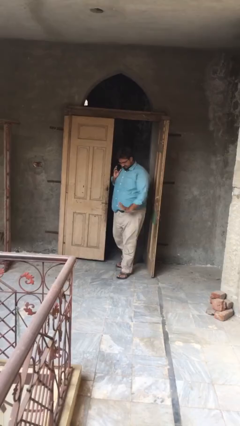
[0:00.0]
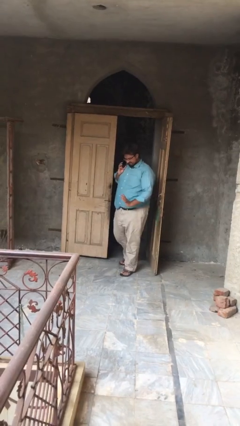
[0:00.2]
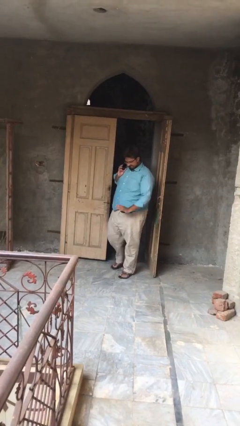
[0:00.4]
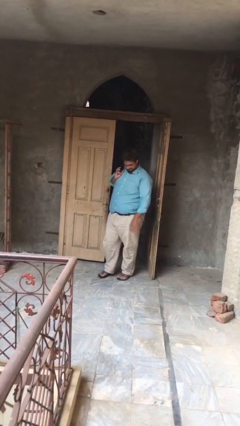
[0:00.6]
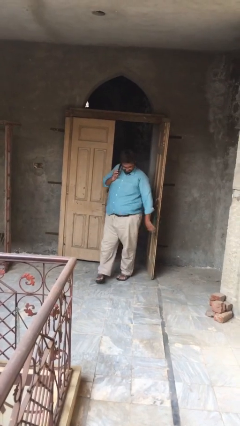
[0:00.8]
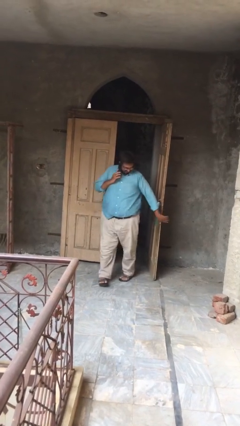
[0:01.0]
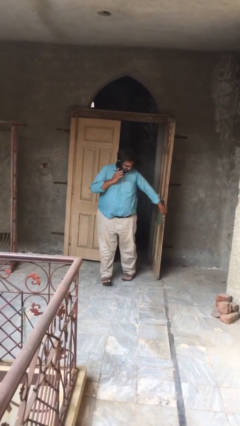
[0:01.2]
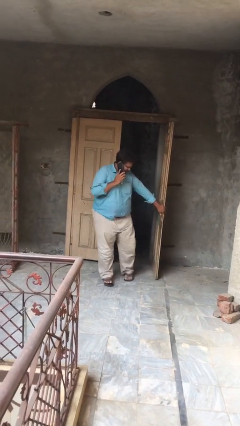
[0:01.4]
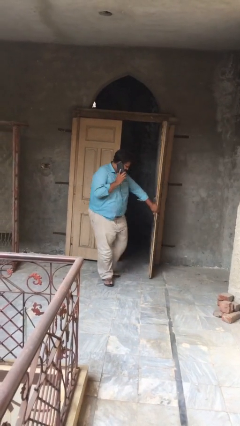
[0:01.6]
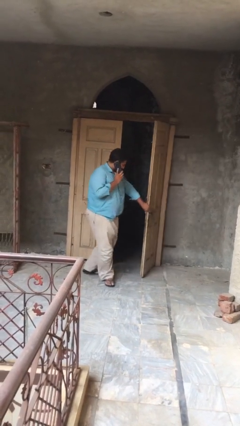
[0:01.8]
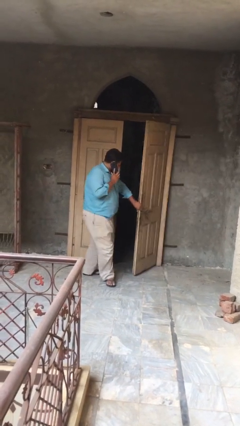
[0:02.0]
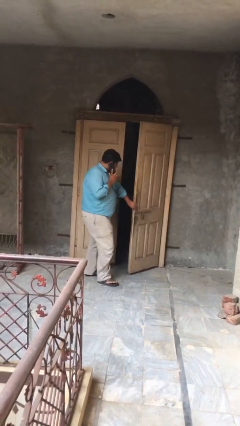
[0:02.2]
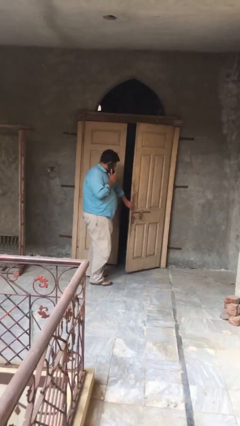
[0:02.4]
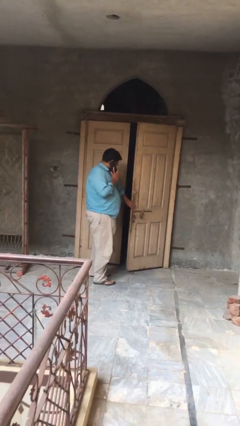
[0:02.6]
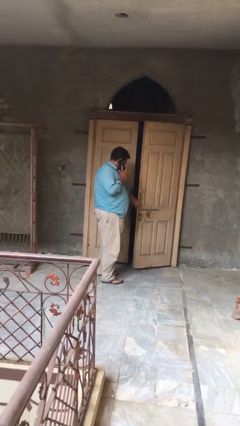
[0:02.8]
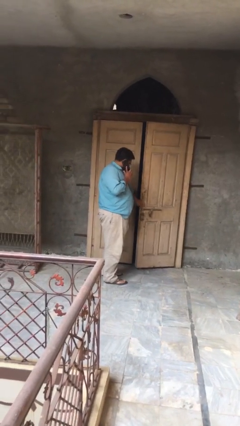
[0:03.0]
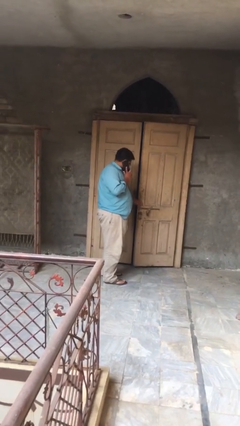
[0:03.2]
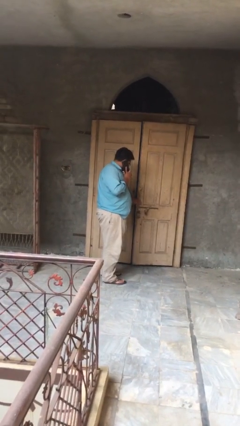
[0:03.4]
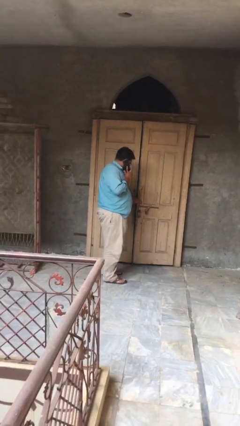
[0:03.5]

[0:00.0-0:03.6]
person closes facility door

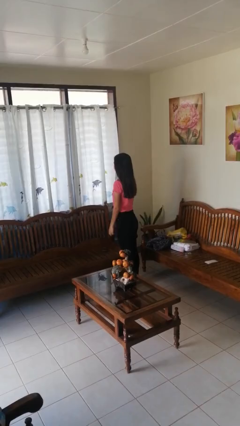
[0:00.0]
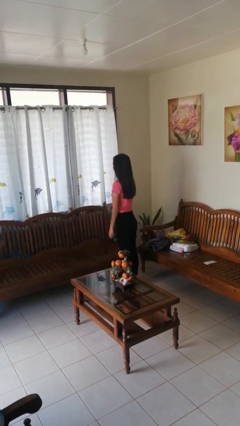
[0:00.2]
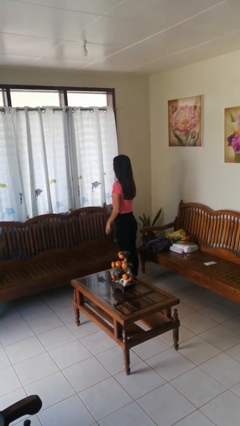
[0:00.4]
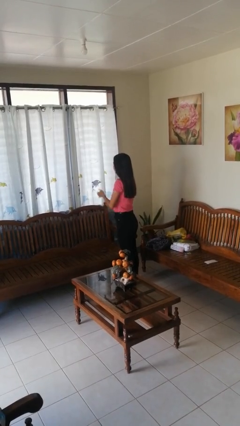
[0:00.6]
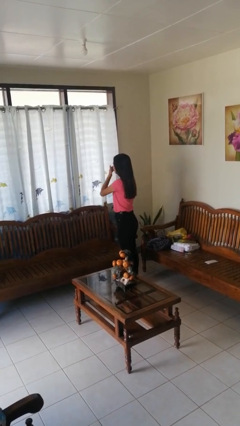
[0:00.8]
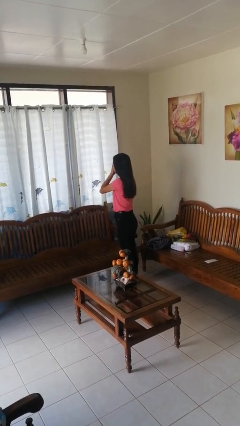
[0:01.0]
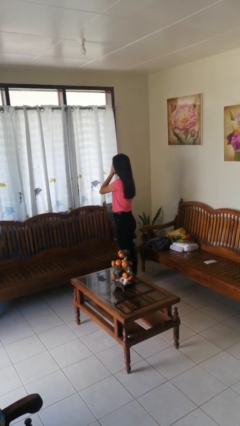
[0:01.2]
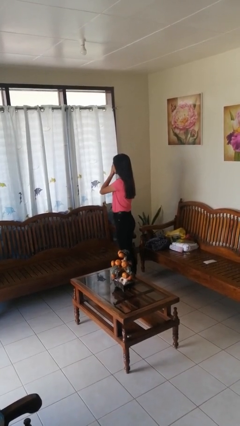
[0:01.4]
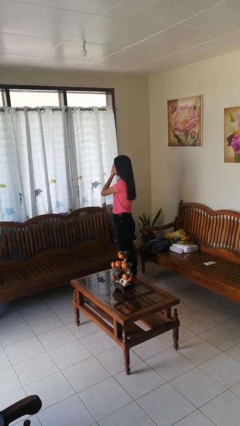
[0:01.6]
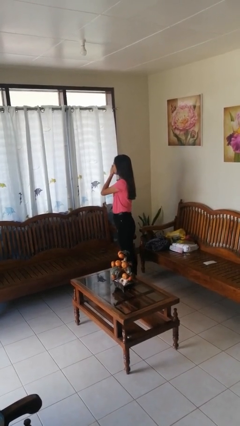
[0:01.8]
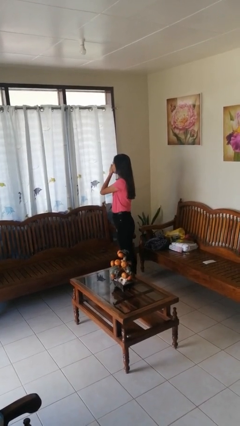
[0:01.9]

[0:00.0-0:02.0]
person yawns

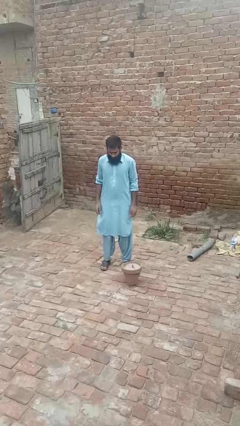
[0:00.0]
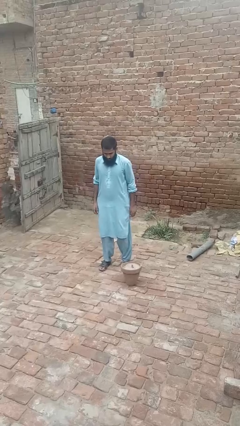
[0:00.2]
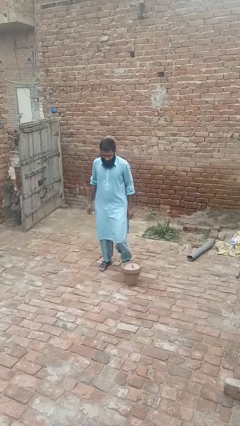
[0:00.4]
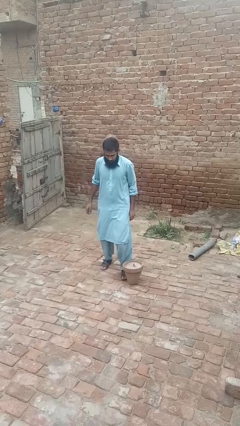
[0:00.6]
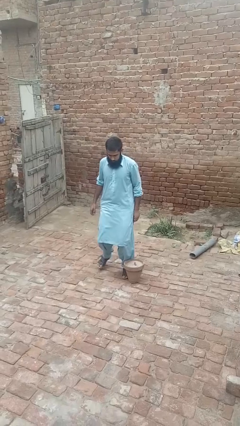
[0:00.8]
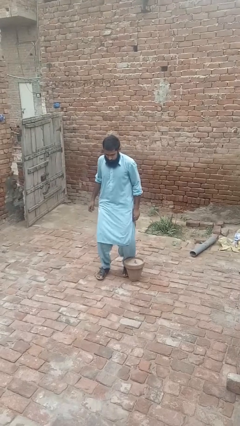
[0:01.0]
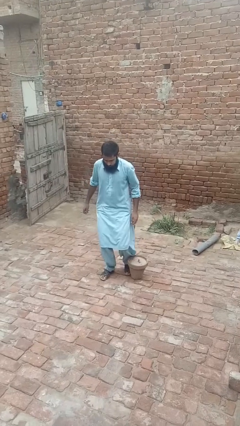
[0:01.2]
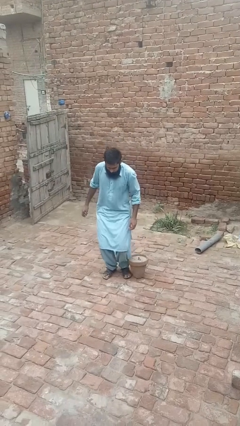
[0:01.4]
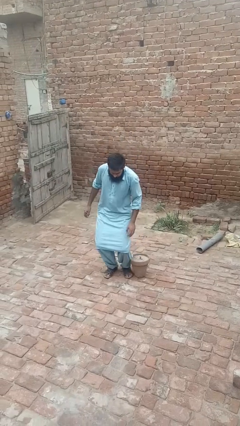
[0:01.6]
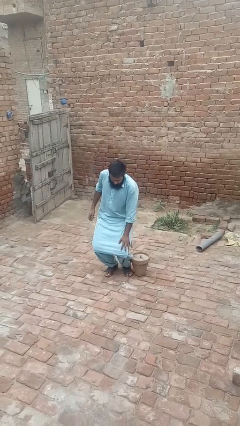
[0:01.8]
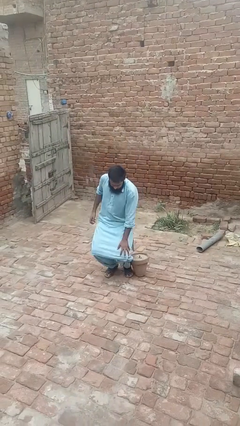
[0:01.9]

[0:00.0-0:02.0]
person trips on object on floor

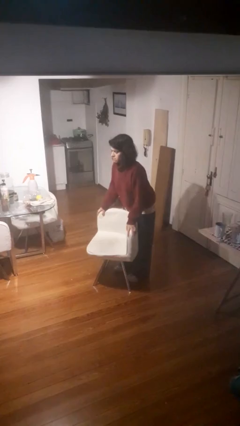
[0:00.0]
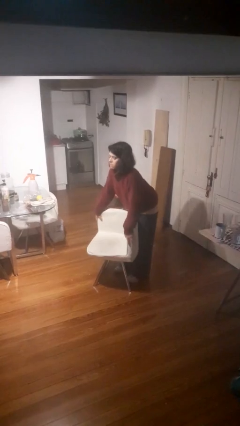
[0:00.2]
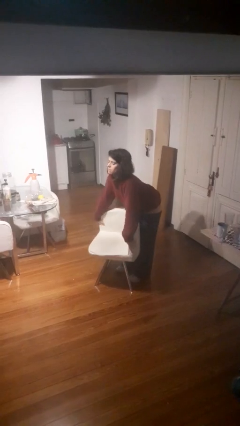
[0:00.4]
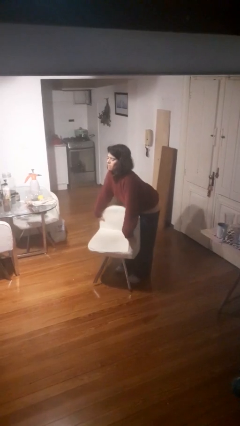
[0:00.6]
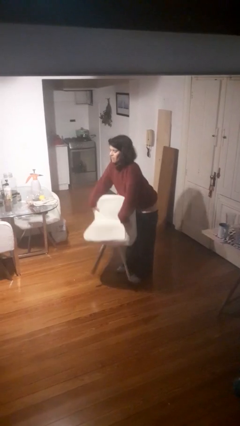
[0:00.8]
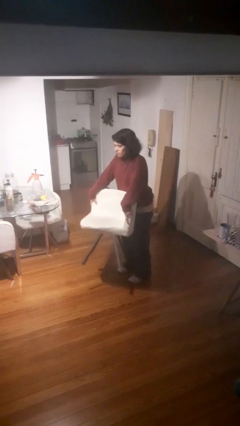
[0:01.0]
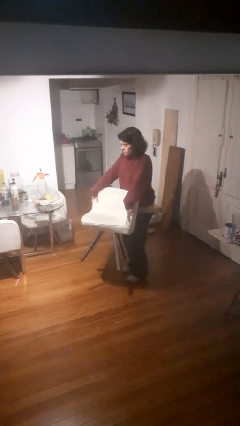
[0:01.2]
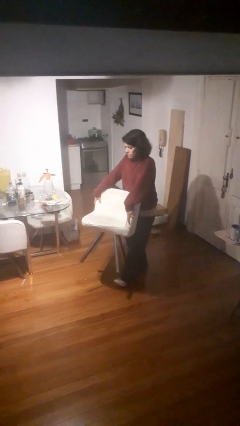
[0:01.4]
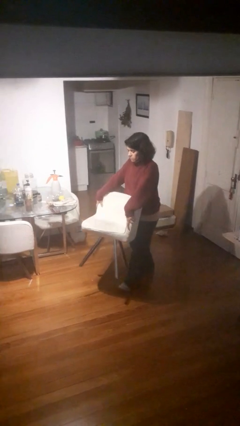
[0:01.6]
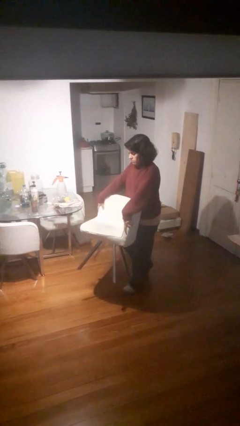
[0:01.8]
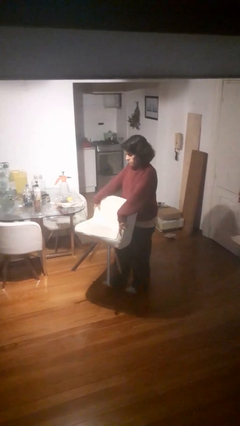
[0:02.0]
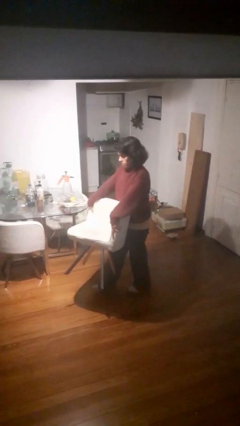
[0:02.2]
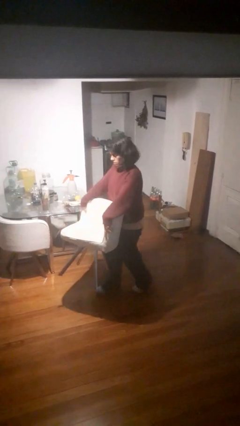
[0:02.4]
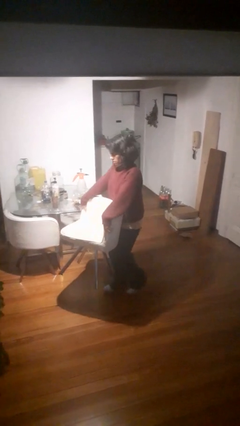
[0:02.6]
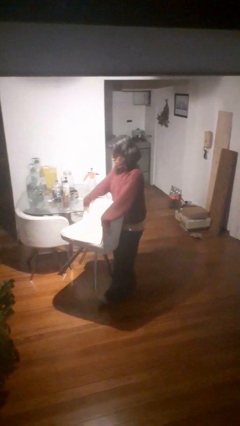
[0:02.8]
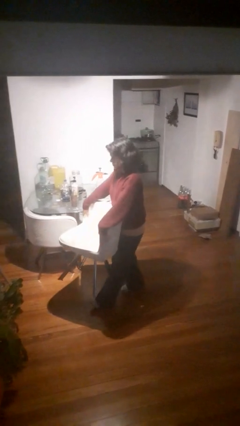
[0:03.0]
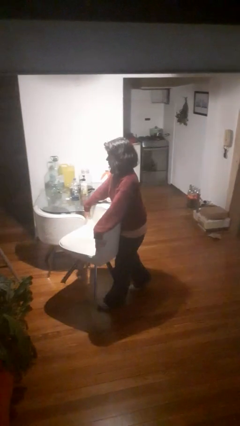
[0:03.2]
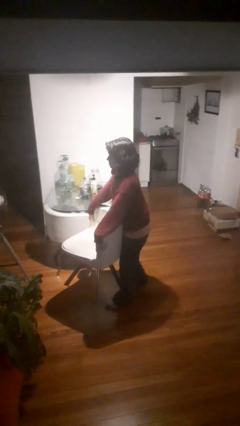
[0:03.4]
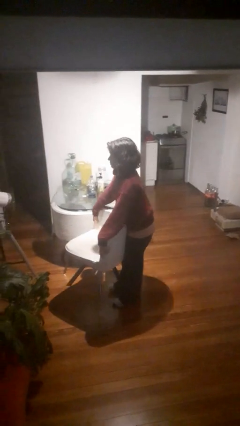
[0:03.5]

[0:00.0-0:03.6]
person carries furniture

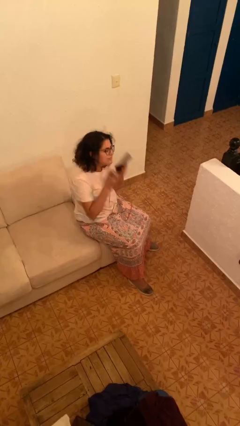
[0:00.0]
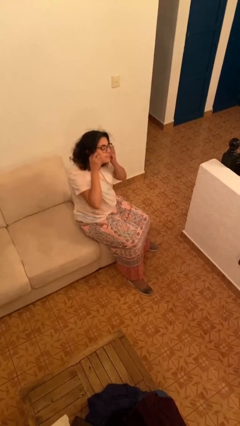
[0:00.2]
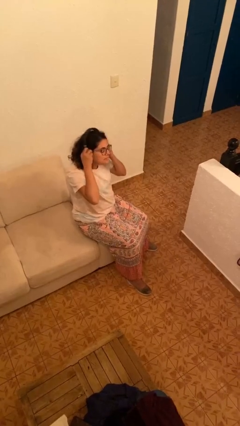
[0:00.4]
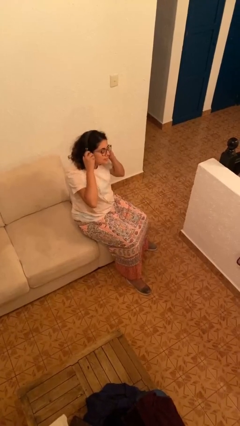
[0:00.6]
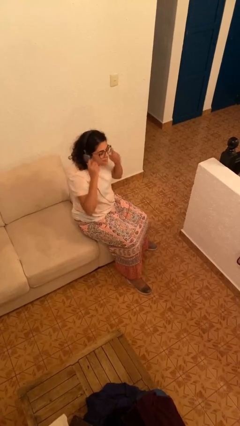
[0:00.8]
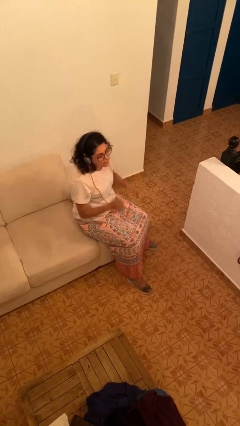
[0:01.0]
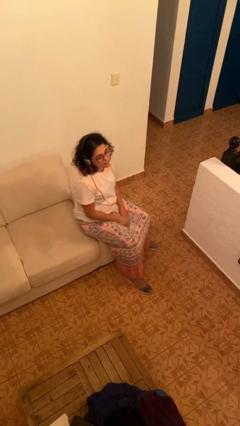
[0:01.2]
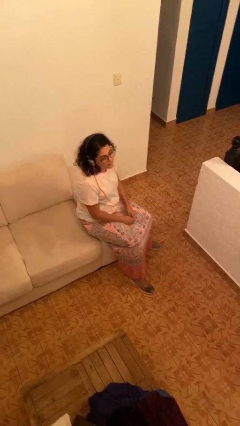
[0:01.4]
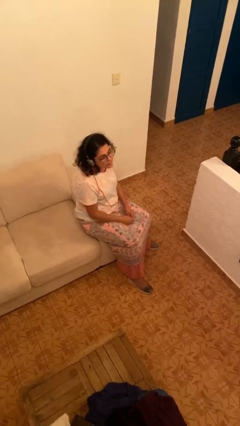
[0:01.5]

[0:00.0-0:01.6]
person puts on headphones

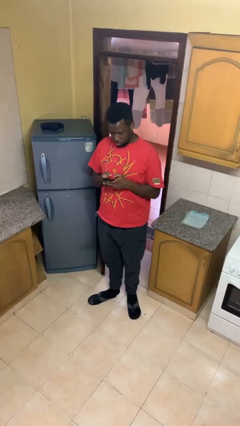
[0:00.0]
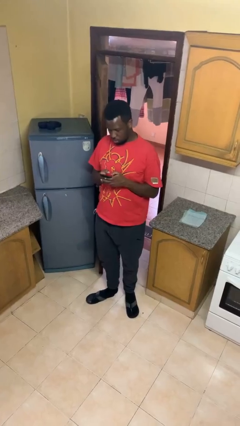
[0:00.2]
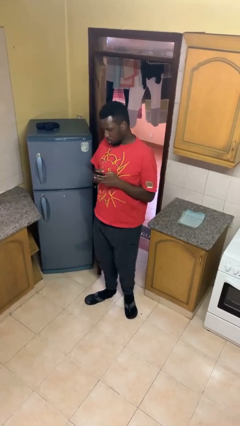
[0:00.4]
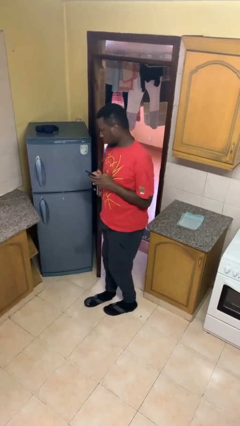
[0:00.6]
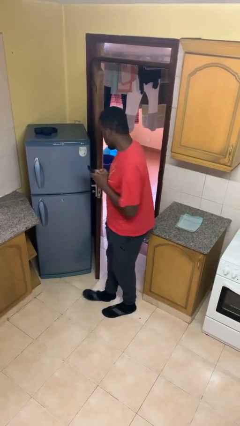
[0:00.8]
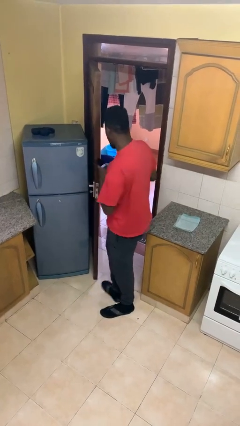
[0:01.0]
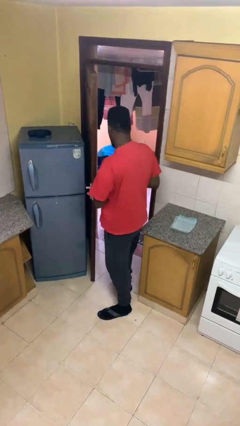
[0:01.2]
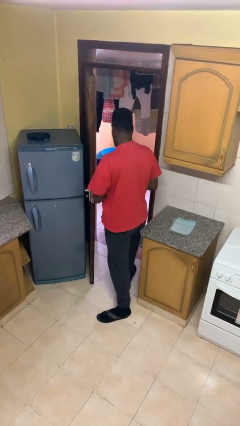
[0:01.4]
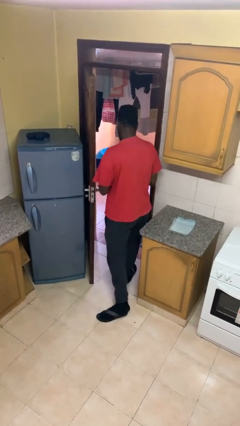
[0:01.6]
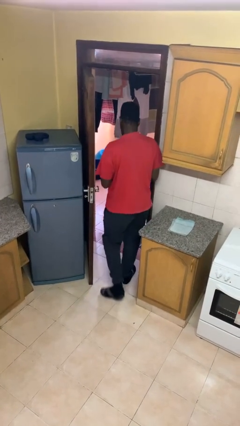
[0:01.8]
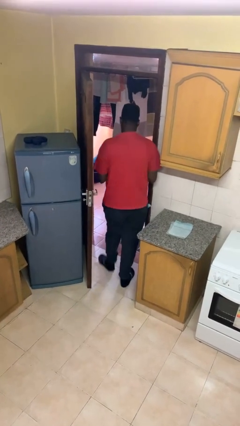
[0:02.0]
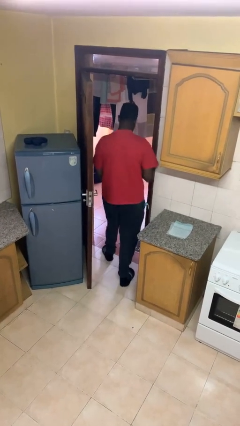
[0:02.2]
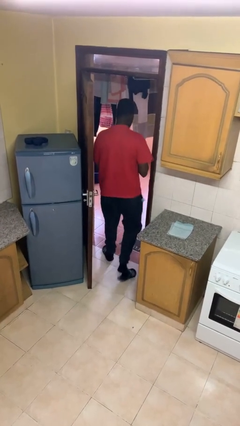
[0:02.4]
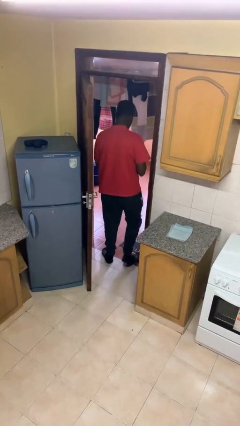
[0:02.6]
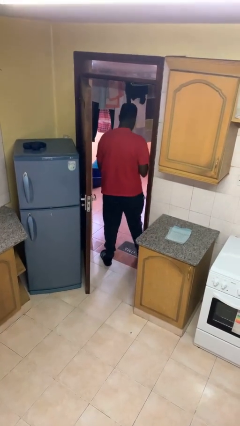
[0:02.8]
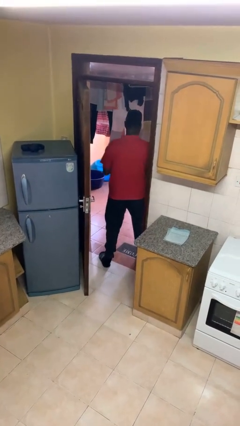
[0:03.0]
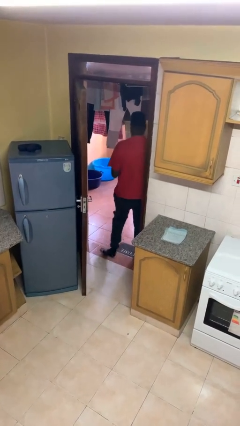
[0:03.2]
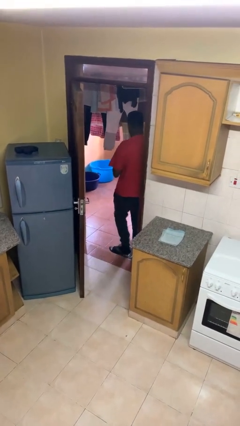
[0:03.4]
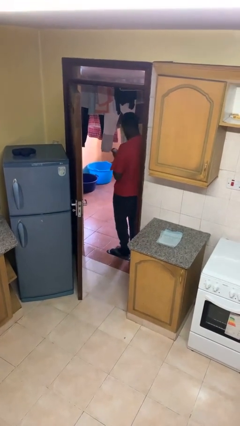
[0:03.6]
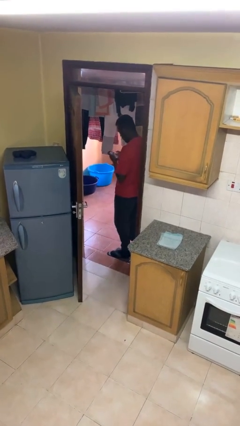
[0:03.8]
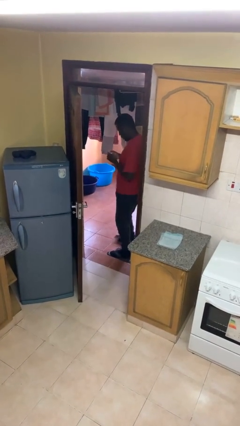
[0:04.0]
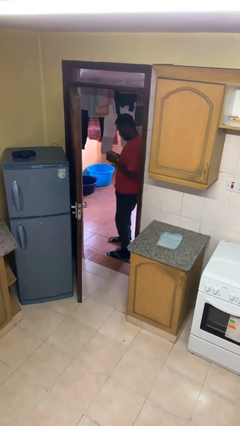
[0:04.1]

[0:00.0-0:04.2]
person exits scene through structure
